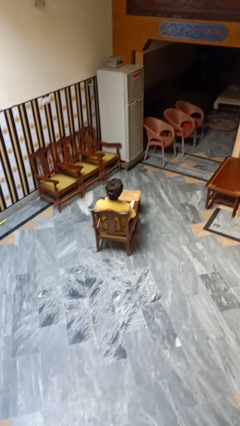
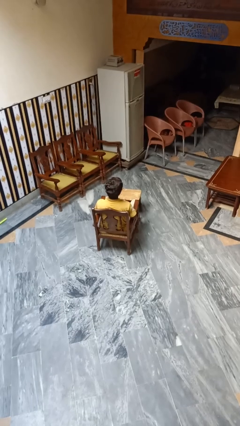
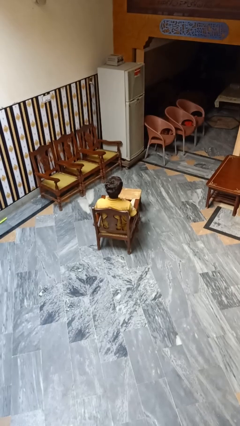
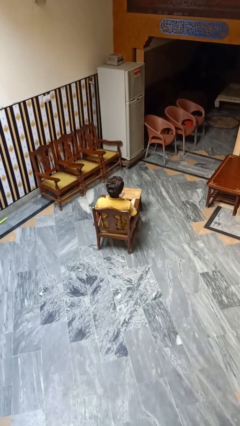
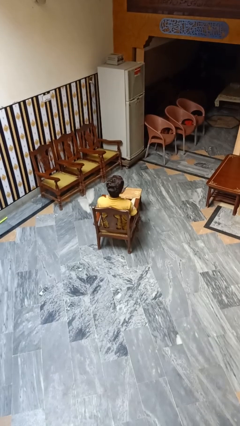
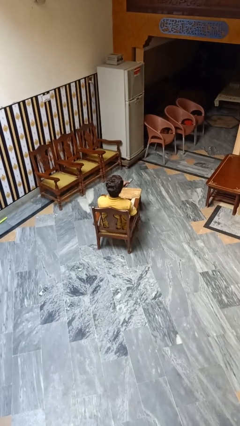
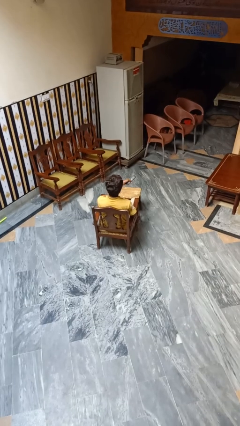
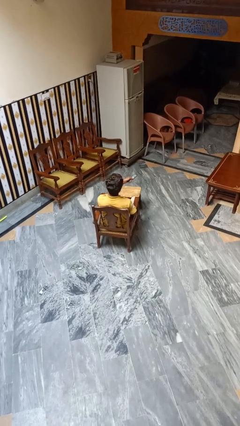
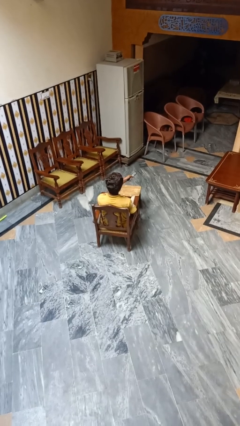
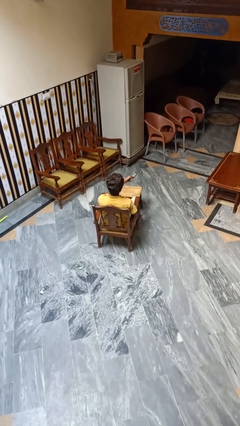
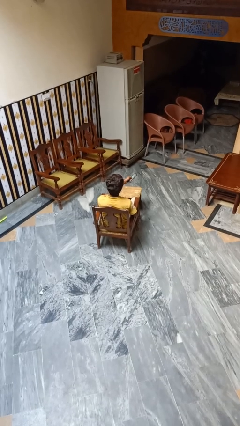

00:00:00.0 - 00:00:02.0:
person uses television remote

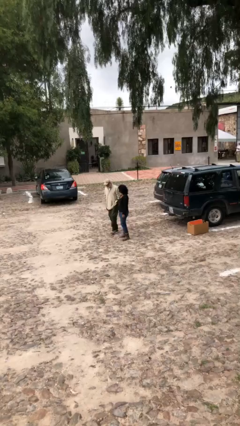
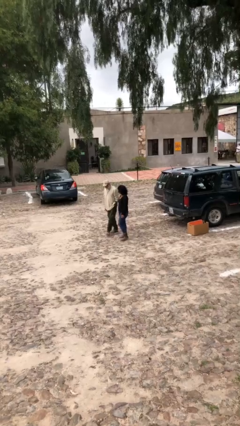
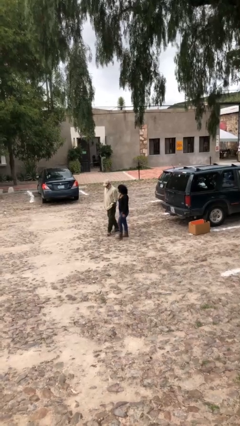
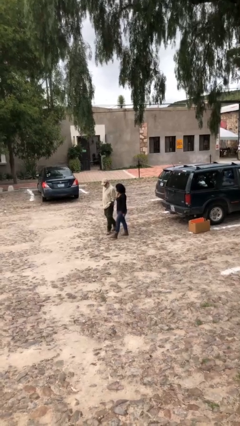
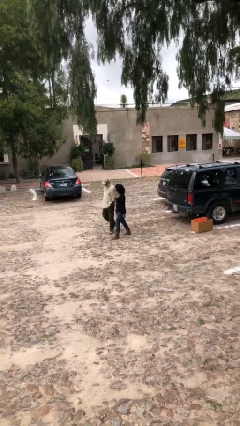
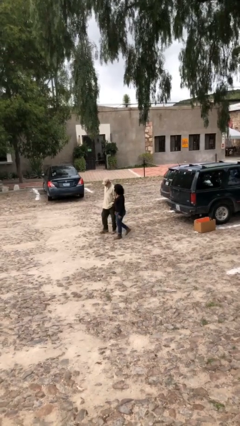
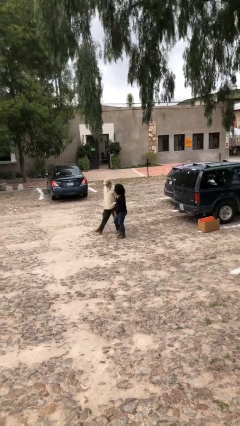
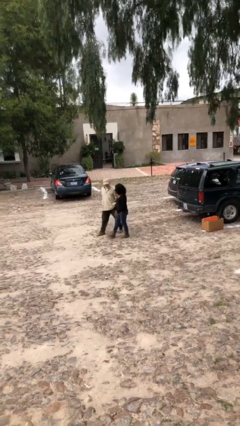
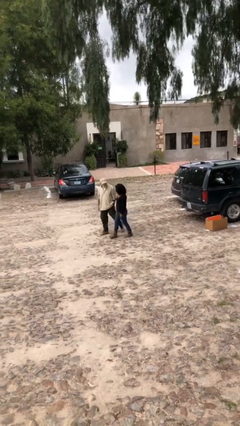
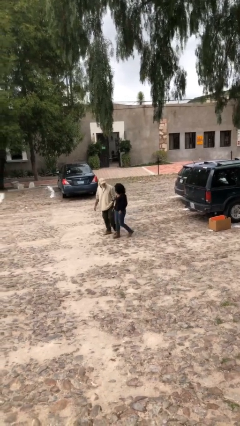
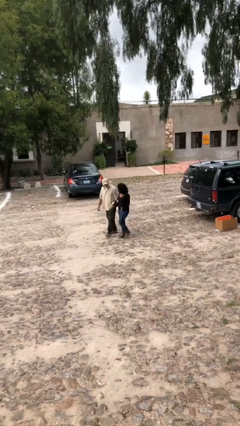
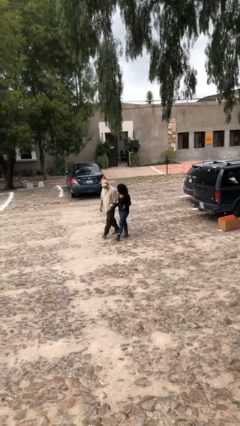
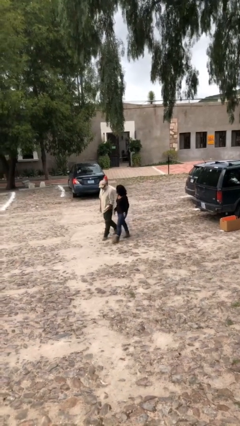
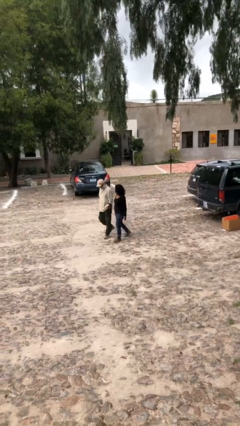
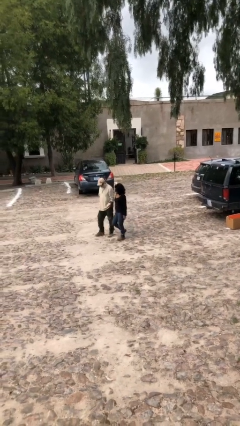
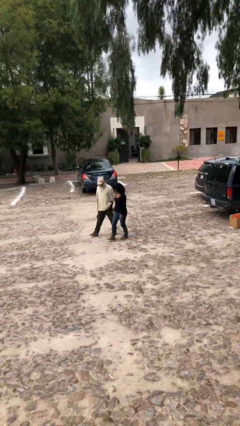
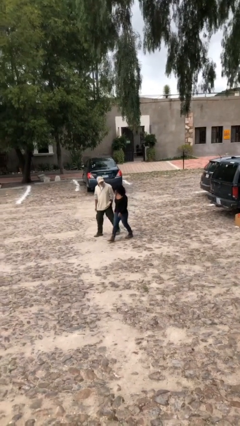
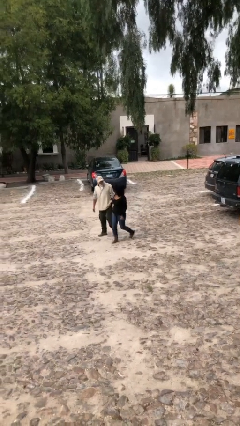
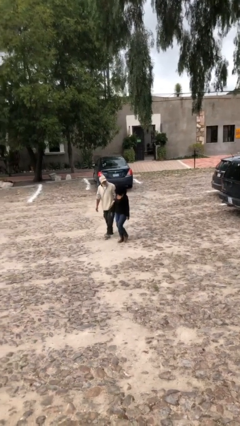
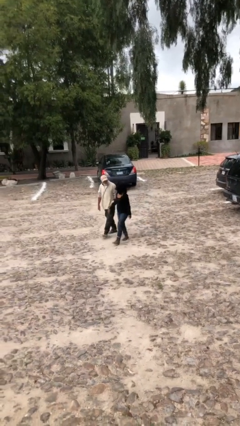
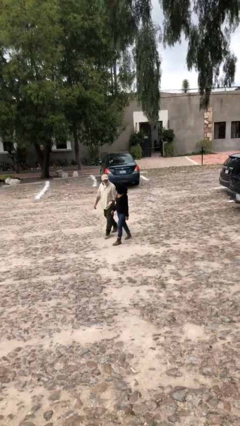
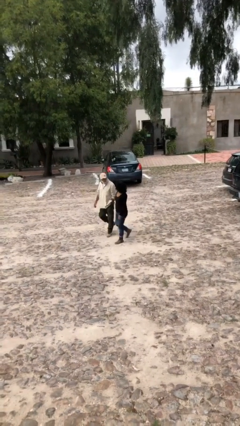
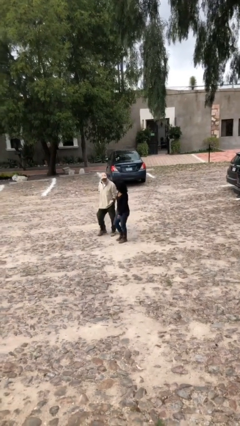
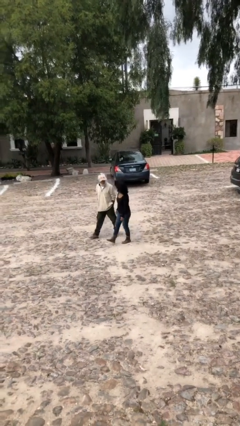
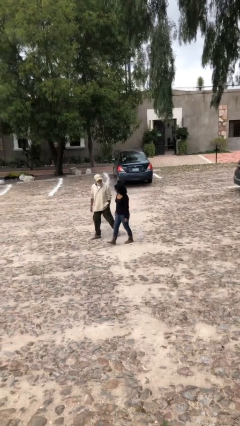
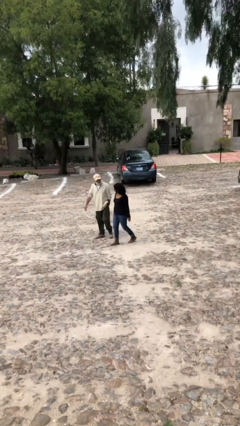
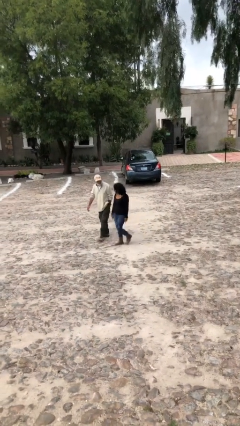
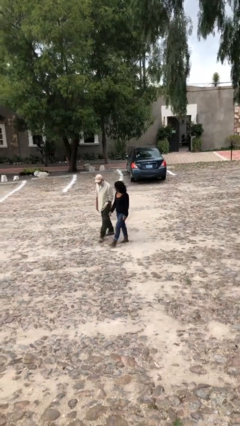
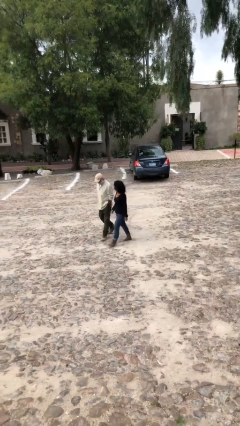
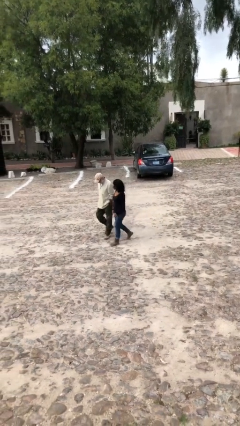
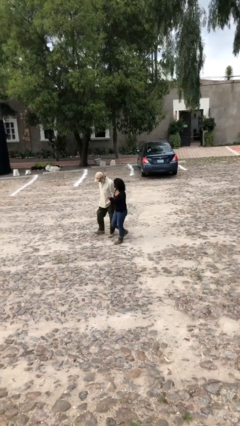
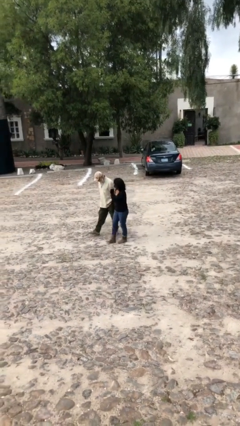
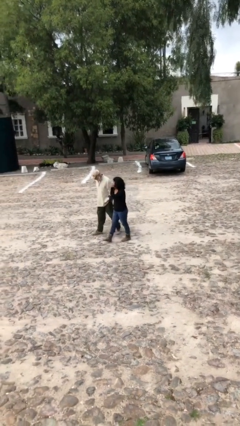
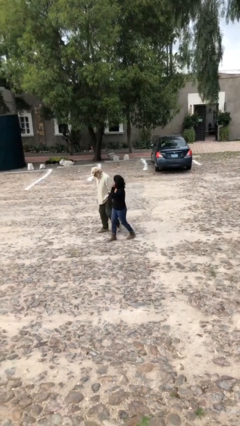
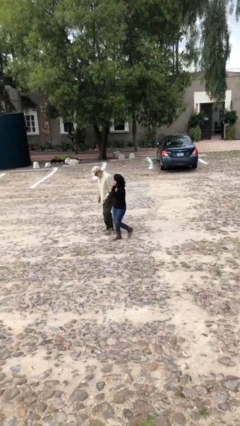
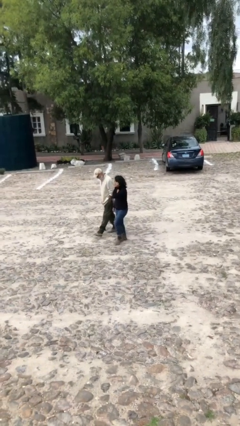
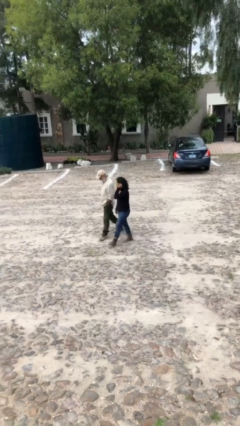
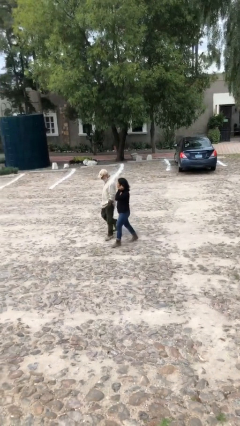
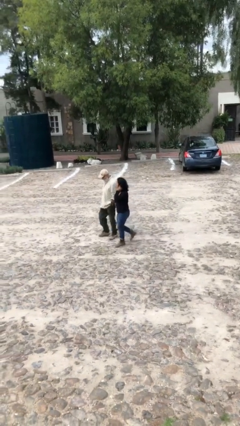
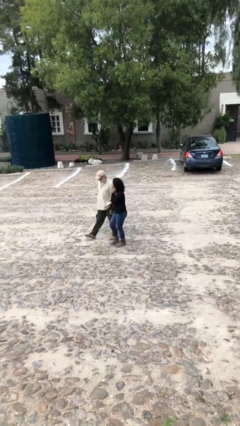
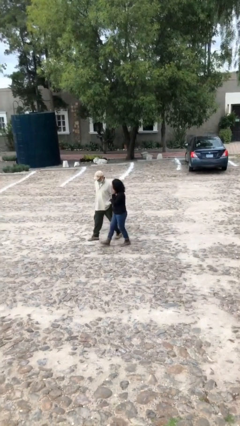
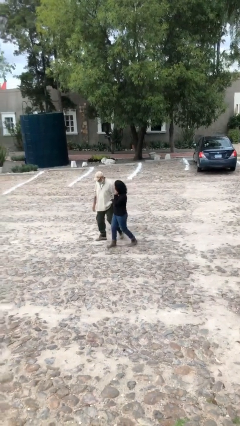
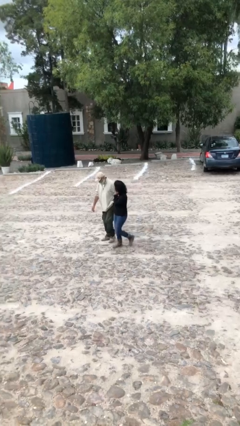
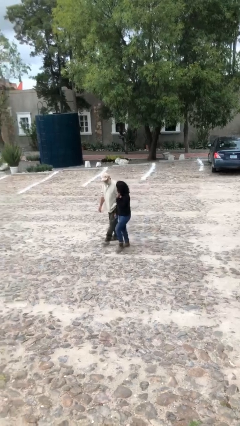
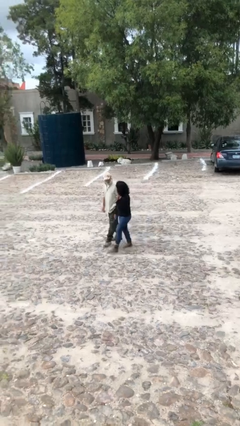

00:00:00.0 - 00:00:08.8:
person talks to person

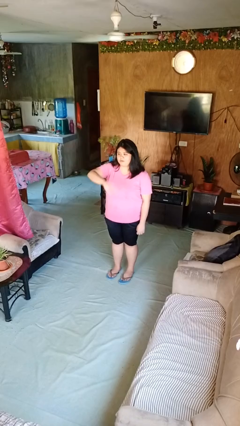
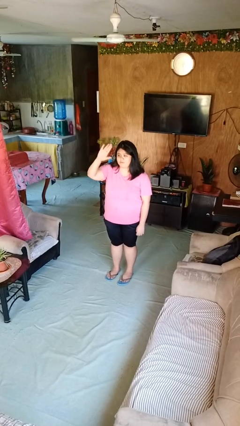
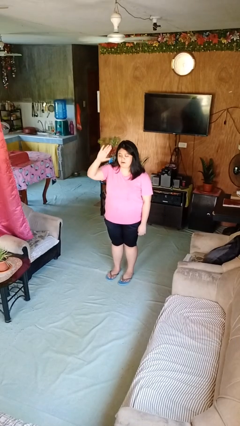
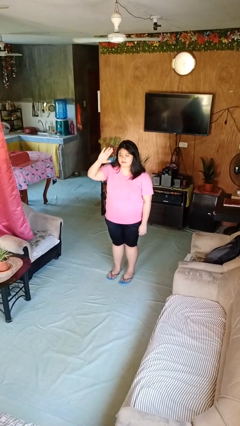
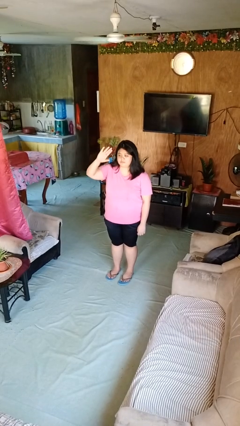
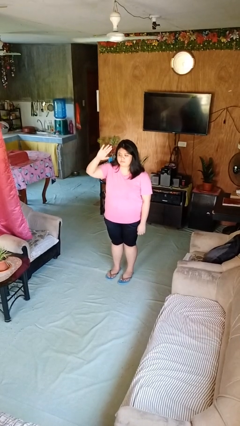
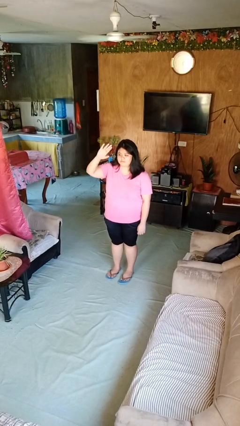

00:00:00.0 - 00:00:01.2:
person gestures swipe up

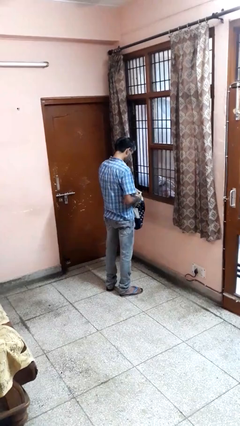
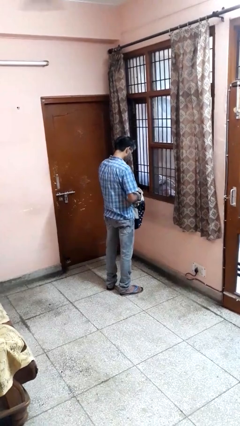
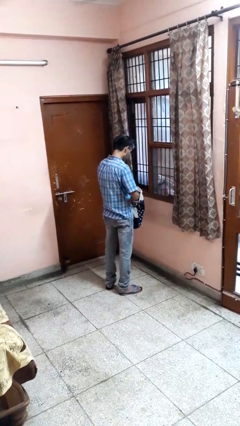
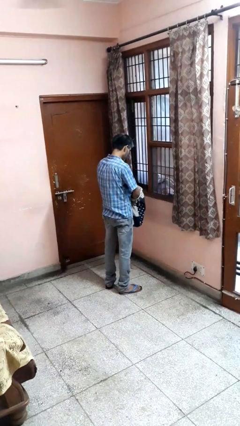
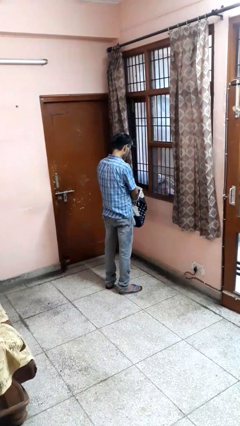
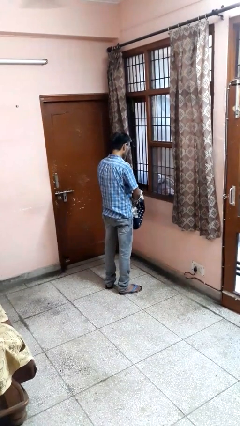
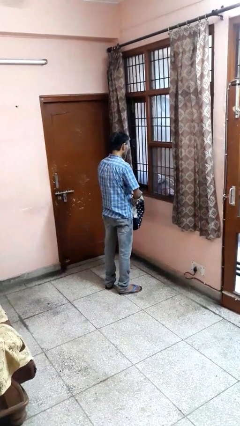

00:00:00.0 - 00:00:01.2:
person puts object into bag

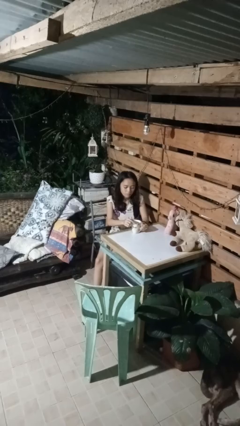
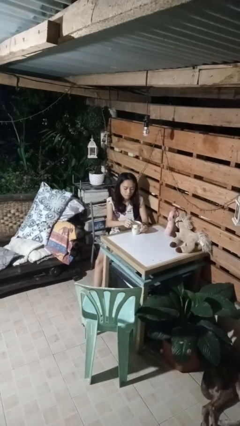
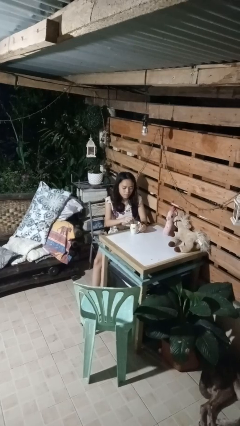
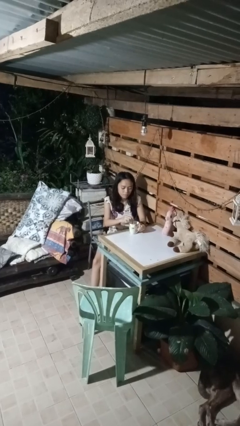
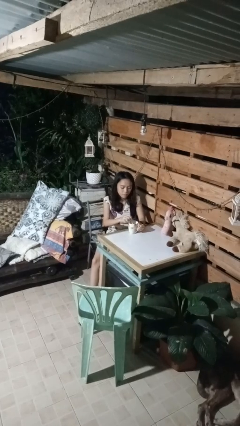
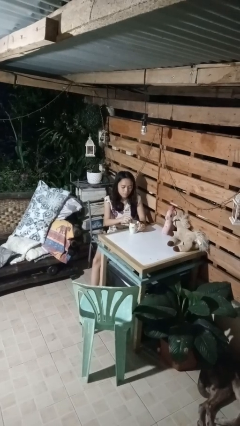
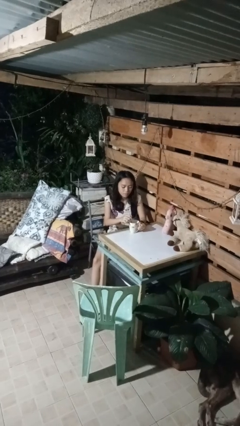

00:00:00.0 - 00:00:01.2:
person stirs mug

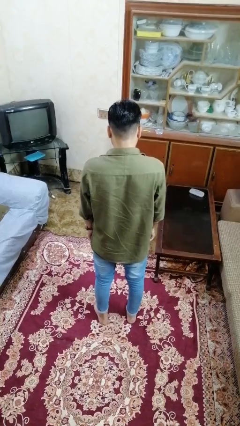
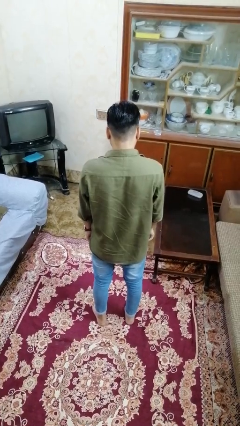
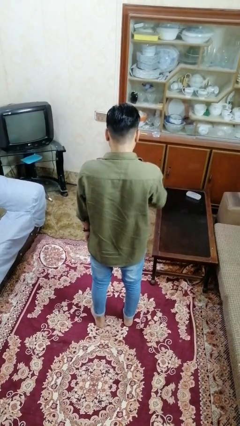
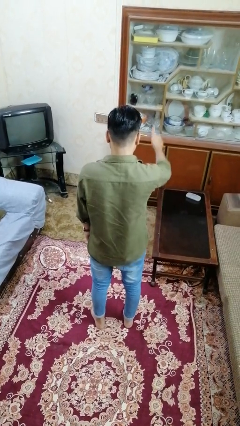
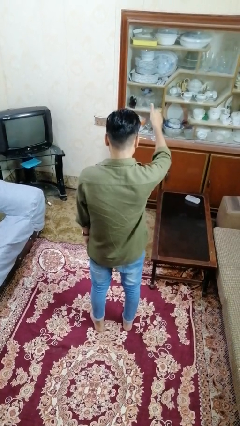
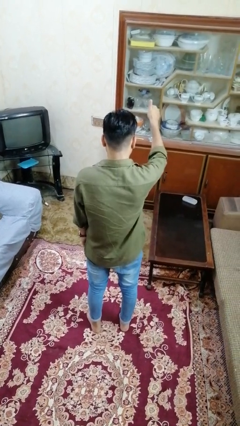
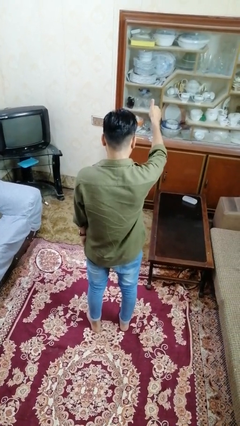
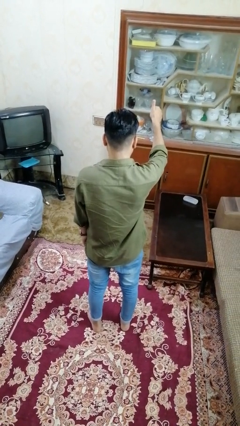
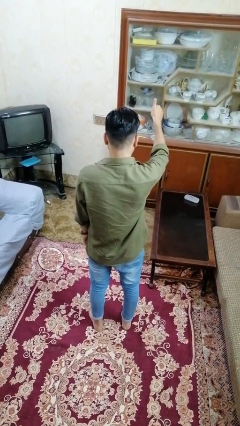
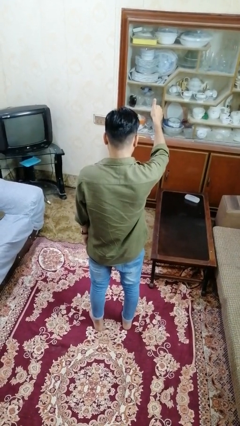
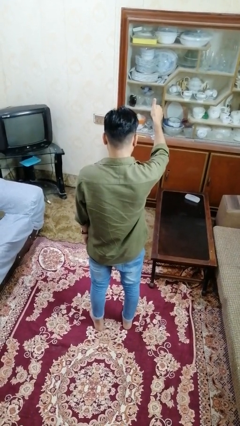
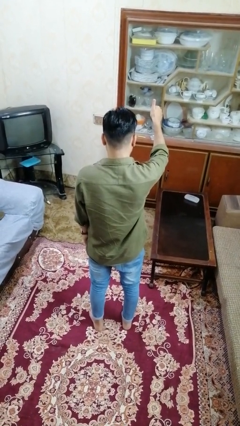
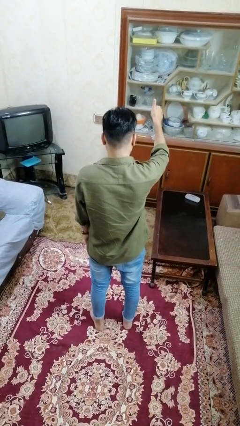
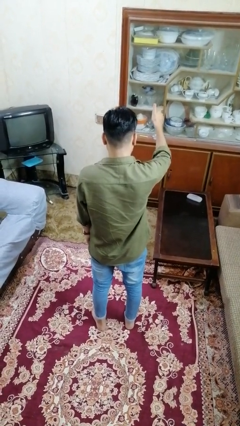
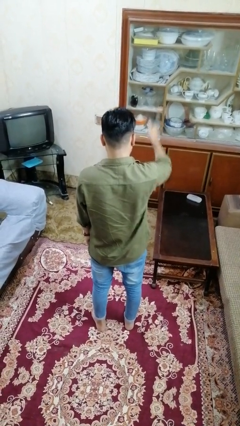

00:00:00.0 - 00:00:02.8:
person gestures thumbs up

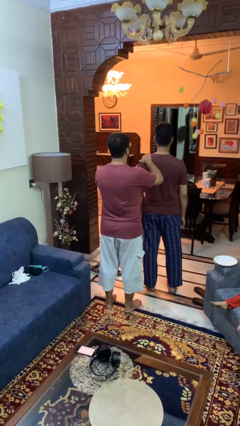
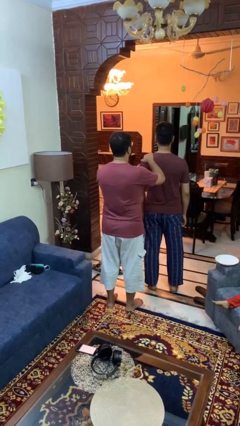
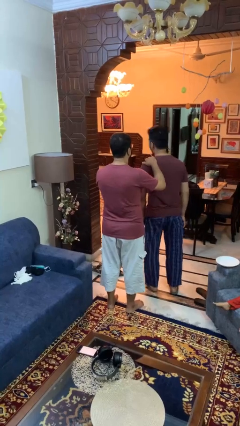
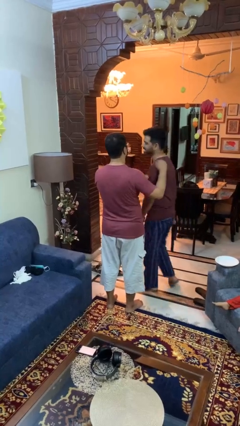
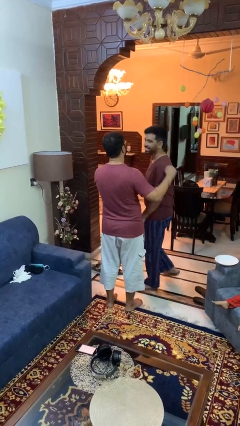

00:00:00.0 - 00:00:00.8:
person spins person around
